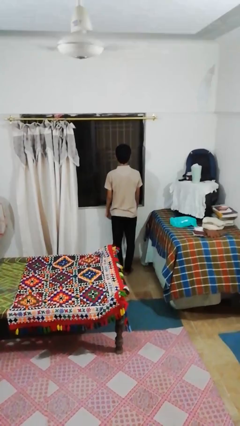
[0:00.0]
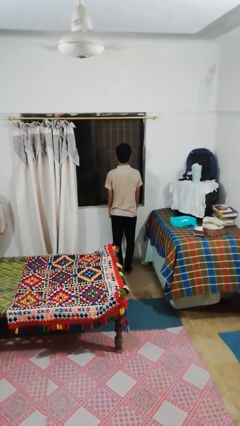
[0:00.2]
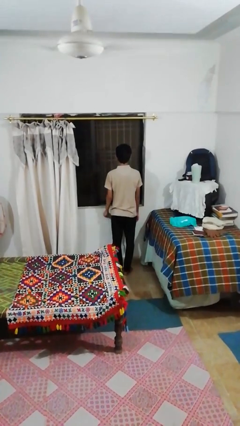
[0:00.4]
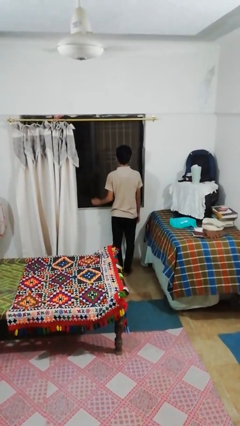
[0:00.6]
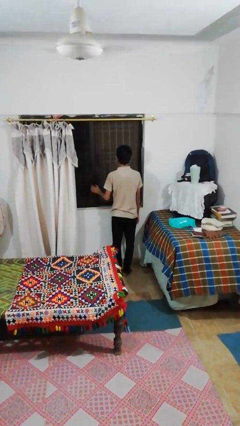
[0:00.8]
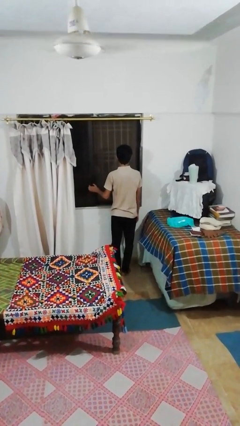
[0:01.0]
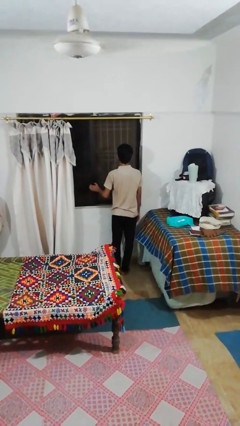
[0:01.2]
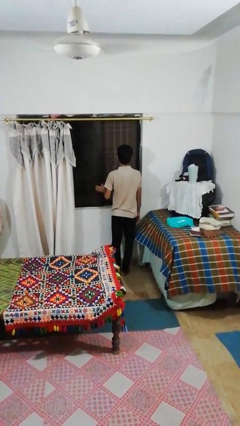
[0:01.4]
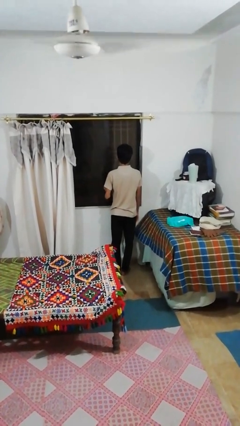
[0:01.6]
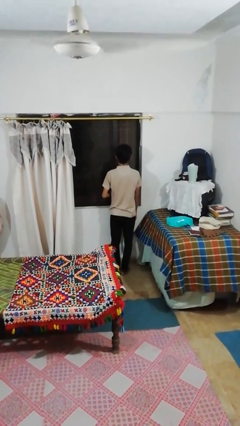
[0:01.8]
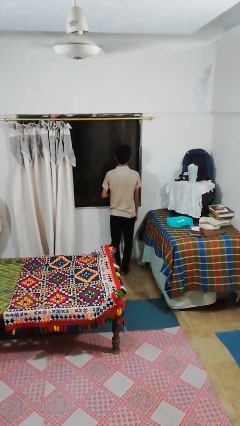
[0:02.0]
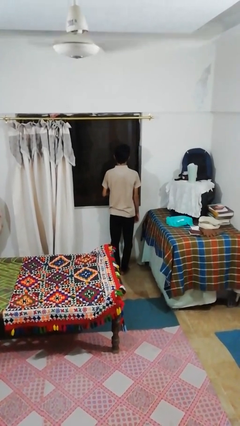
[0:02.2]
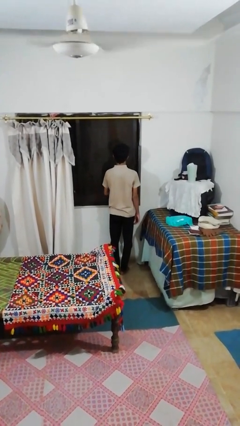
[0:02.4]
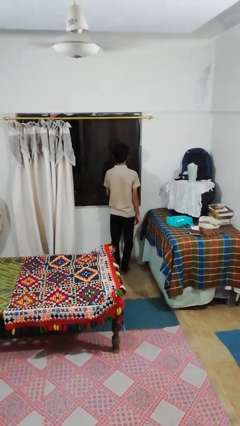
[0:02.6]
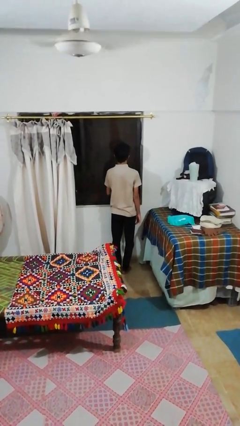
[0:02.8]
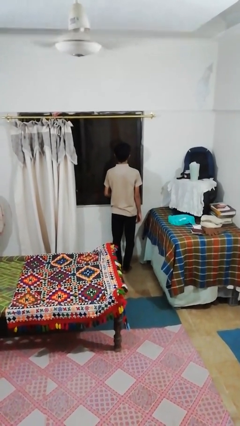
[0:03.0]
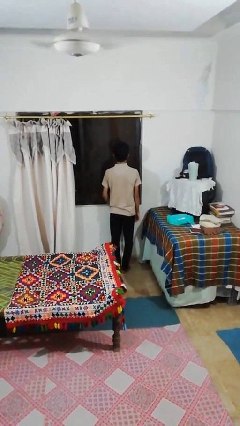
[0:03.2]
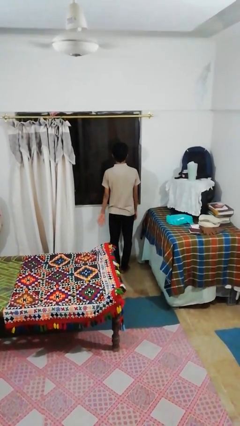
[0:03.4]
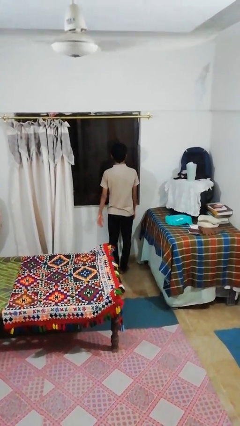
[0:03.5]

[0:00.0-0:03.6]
person closes sliding door

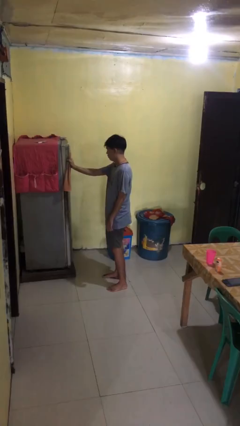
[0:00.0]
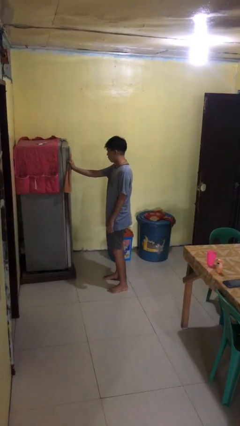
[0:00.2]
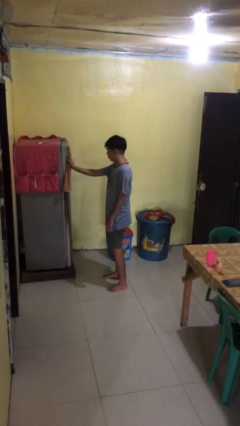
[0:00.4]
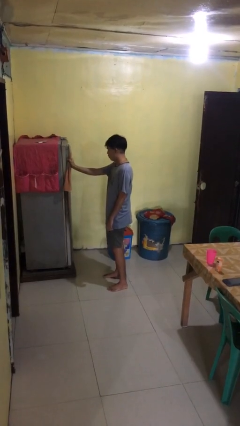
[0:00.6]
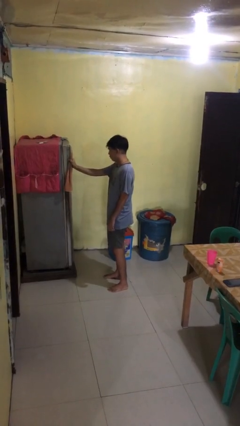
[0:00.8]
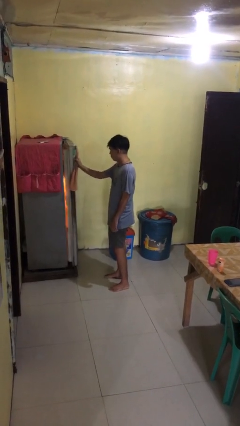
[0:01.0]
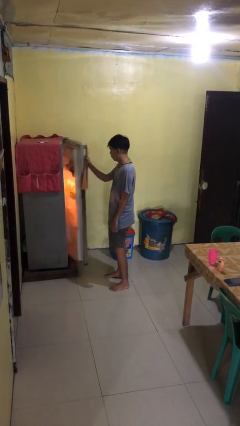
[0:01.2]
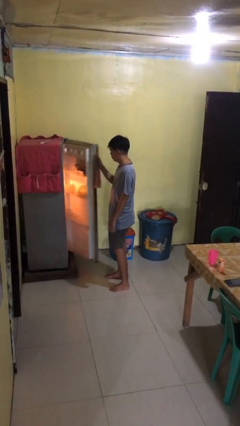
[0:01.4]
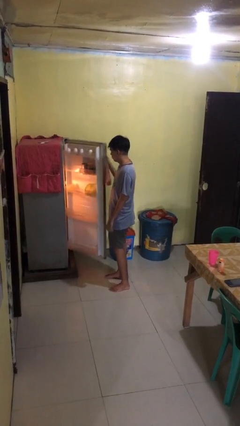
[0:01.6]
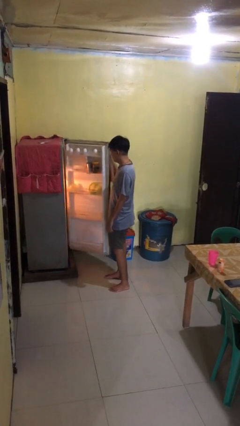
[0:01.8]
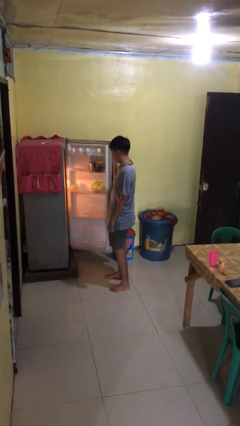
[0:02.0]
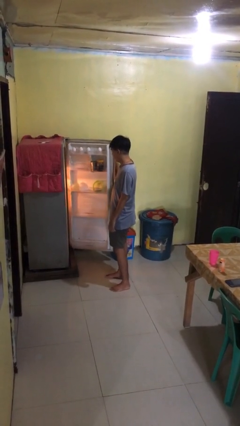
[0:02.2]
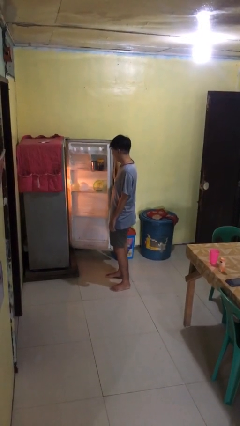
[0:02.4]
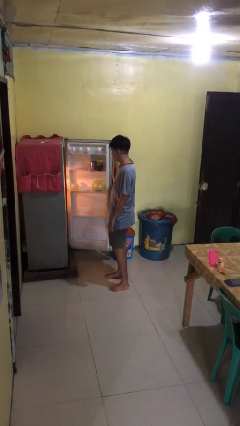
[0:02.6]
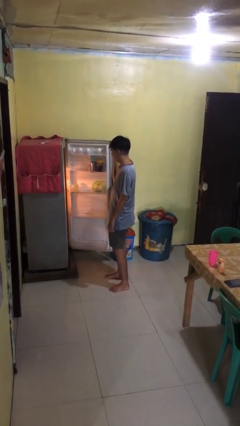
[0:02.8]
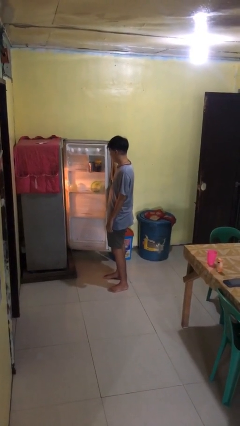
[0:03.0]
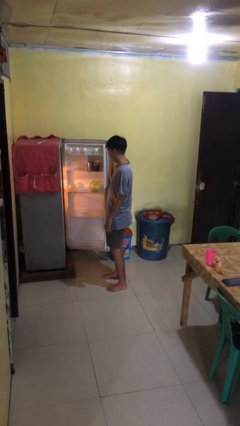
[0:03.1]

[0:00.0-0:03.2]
person opens refrigerator

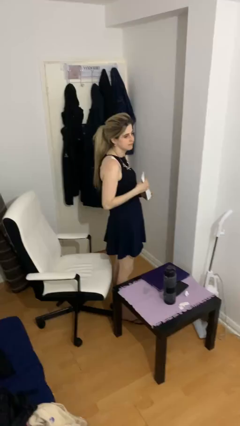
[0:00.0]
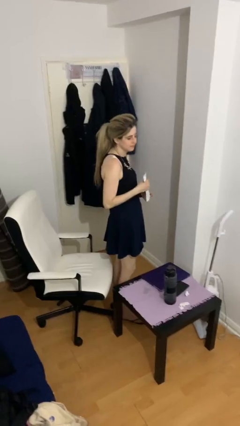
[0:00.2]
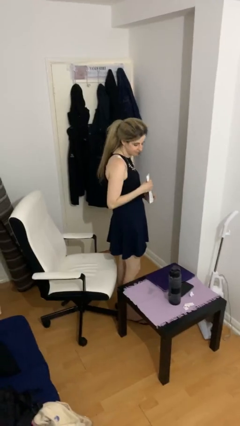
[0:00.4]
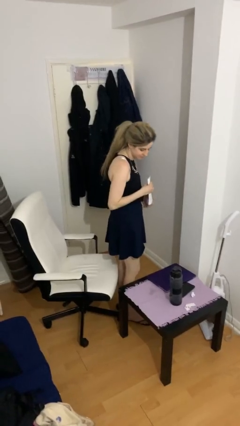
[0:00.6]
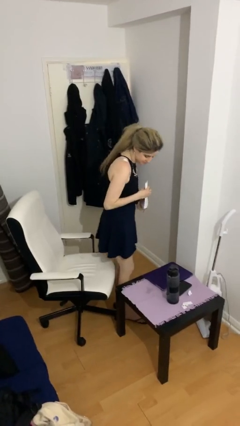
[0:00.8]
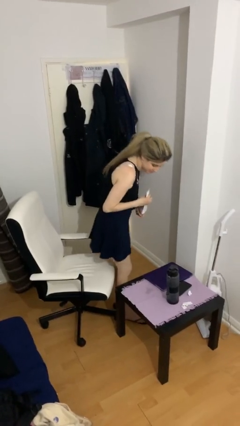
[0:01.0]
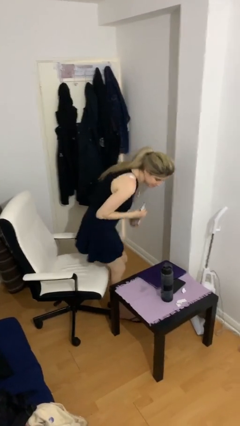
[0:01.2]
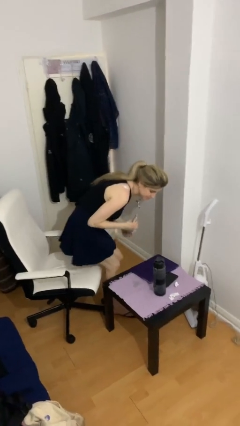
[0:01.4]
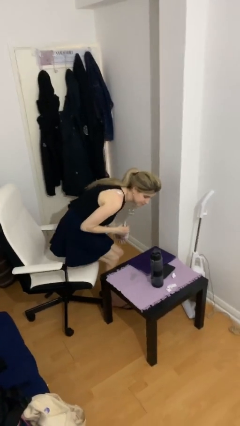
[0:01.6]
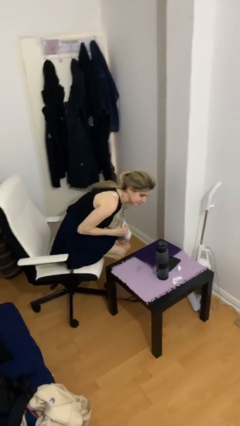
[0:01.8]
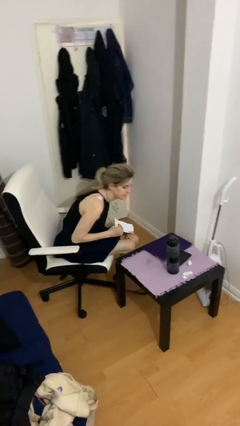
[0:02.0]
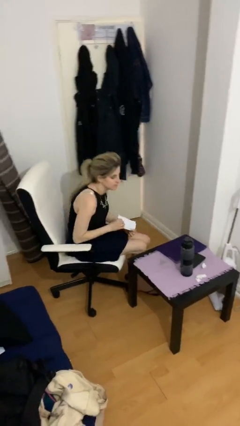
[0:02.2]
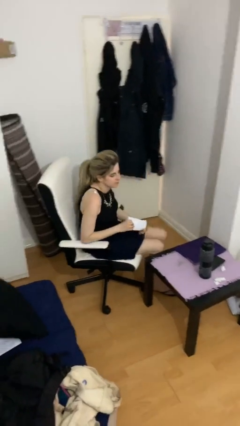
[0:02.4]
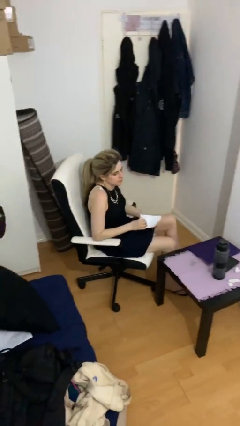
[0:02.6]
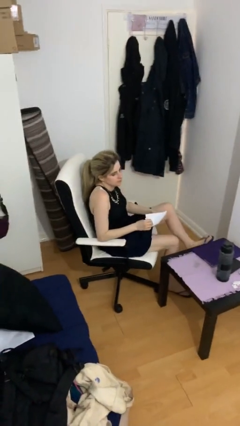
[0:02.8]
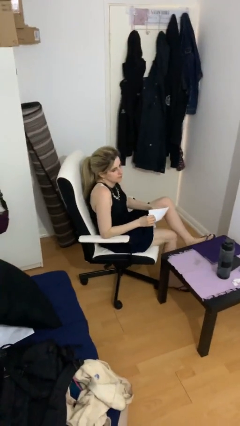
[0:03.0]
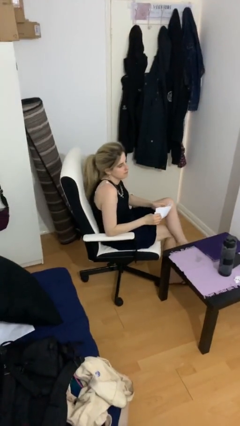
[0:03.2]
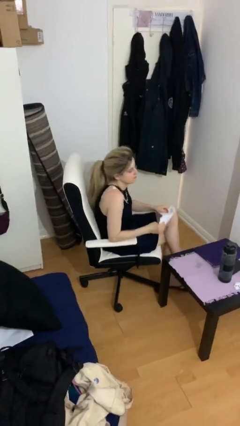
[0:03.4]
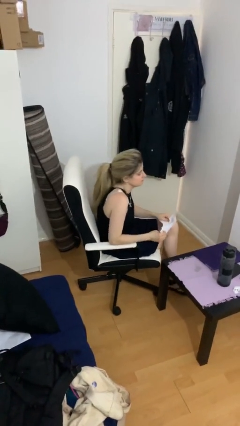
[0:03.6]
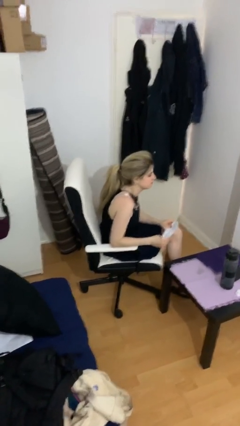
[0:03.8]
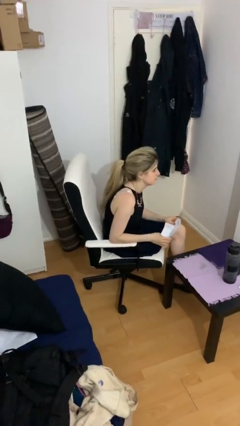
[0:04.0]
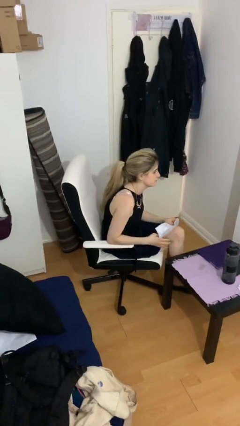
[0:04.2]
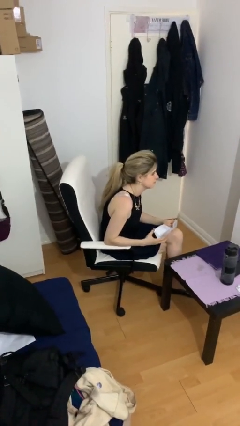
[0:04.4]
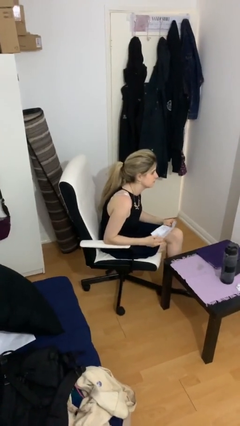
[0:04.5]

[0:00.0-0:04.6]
person sits down

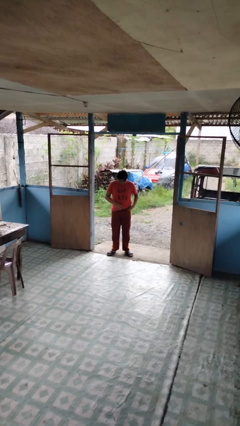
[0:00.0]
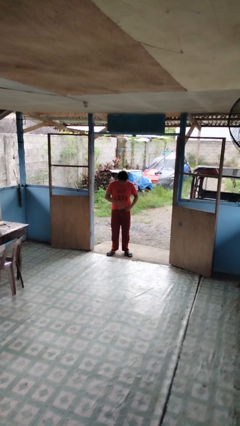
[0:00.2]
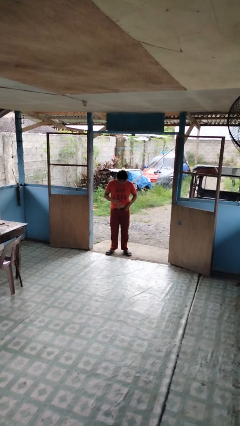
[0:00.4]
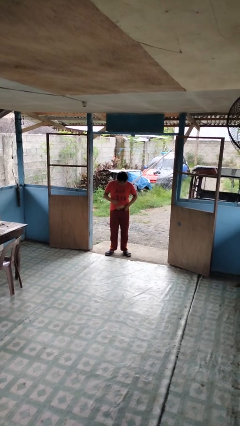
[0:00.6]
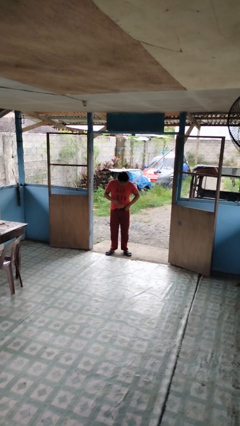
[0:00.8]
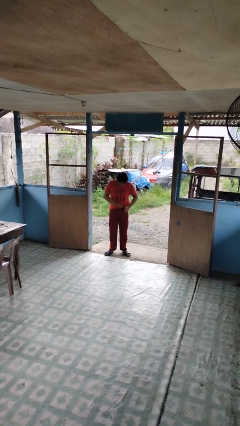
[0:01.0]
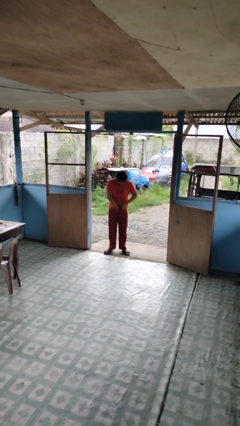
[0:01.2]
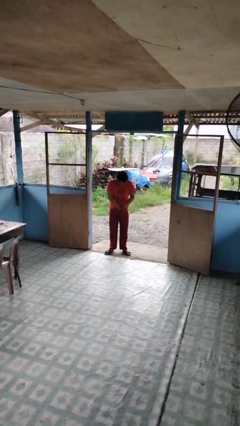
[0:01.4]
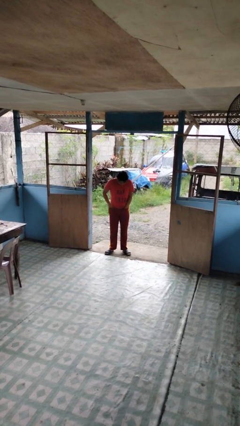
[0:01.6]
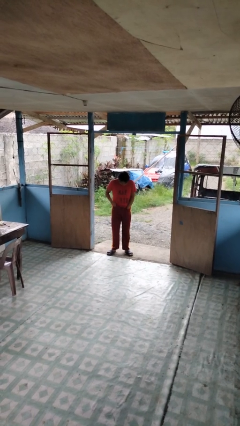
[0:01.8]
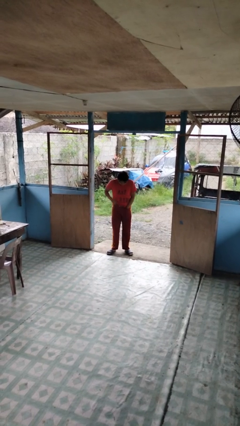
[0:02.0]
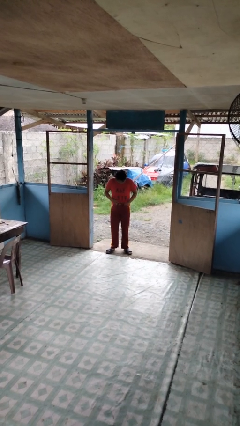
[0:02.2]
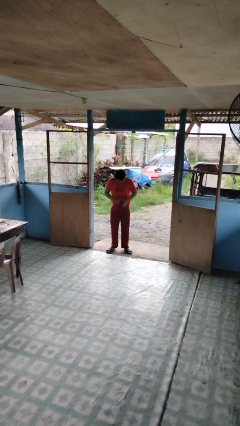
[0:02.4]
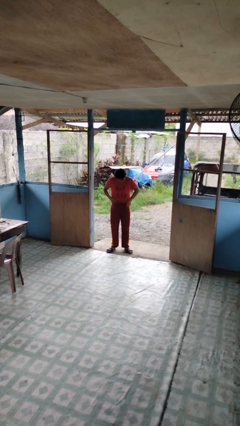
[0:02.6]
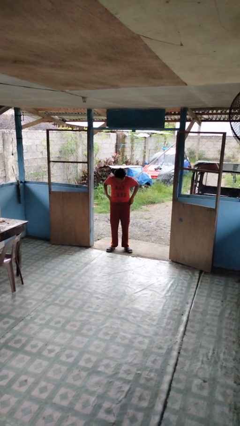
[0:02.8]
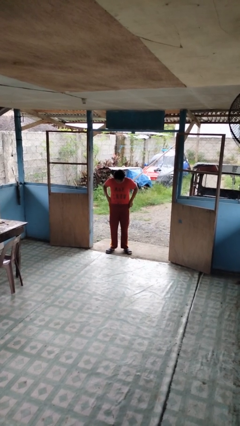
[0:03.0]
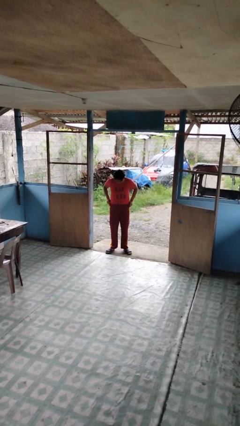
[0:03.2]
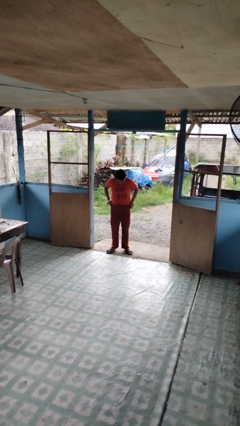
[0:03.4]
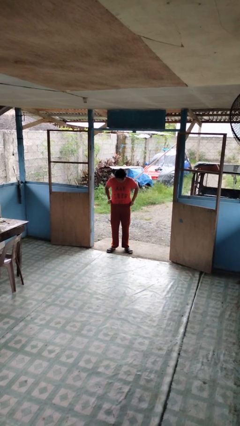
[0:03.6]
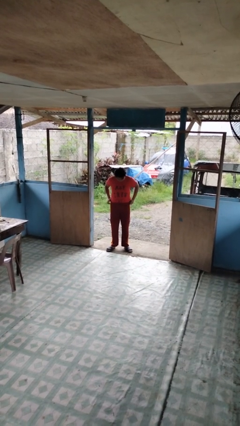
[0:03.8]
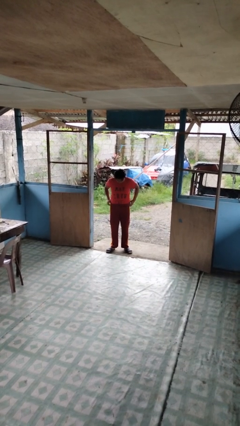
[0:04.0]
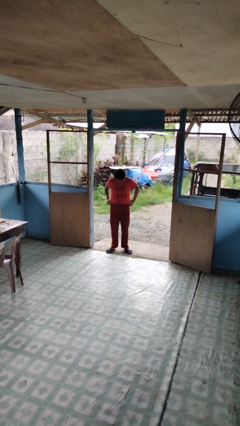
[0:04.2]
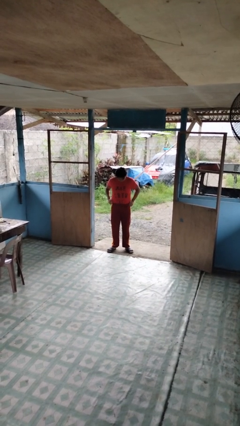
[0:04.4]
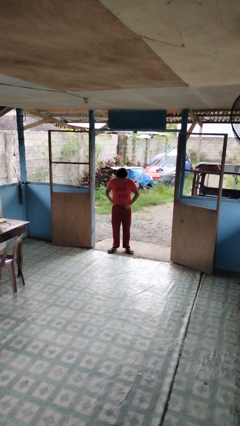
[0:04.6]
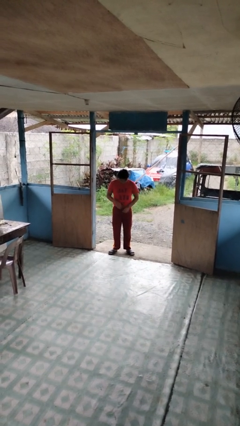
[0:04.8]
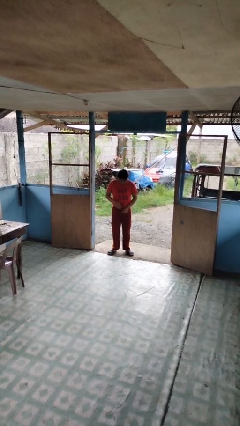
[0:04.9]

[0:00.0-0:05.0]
person tucks in shirt

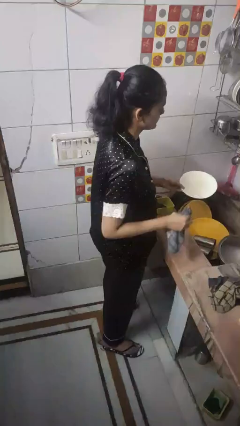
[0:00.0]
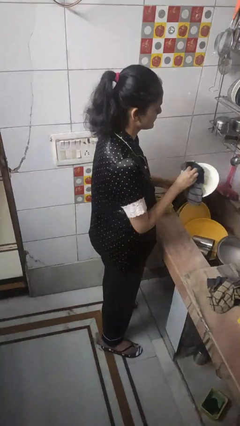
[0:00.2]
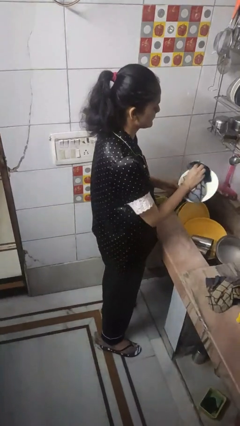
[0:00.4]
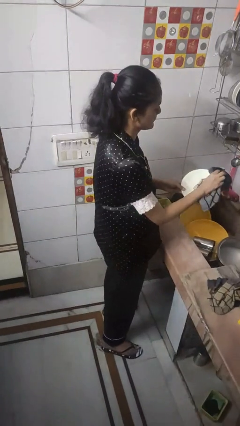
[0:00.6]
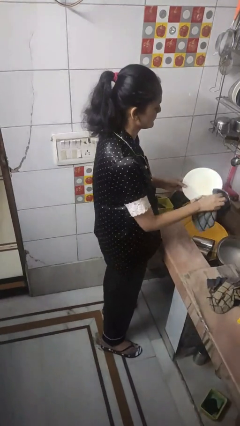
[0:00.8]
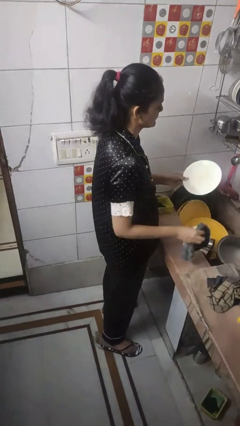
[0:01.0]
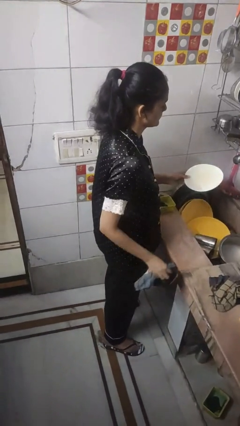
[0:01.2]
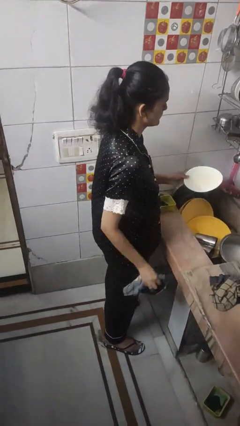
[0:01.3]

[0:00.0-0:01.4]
person dries dish
